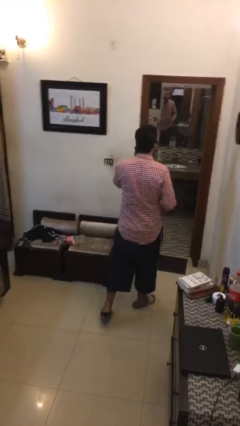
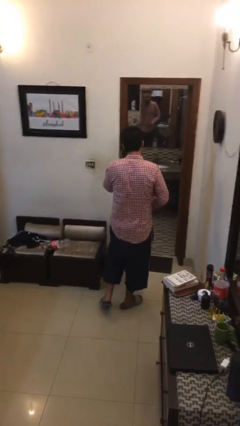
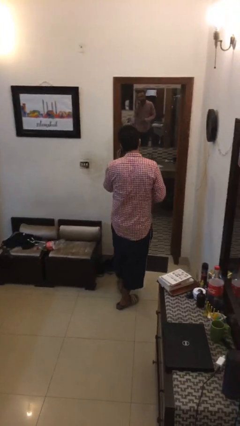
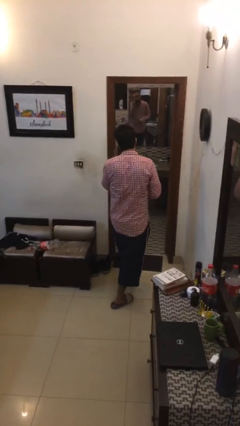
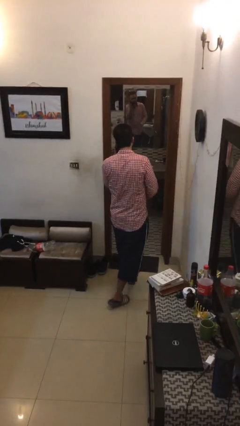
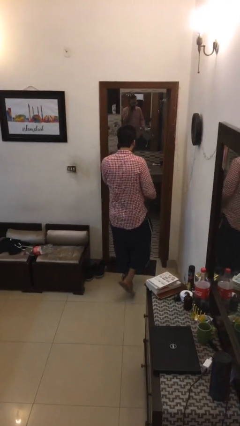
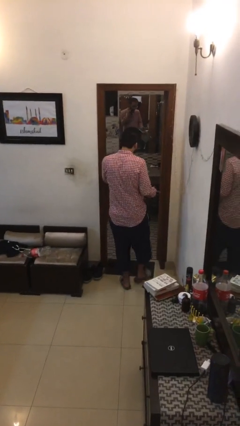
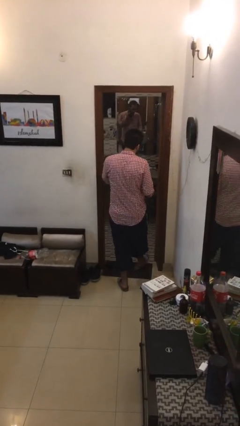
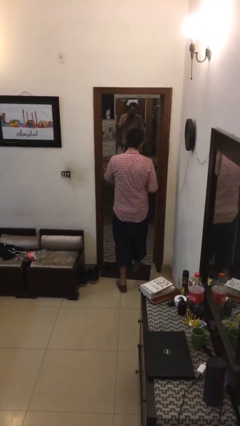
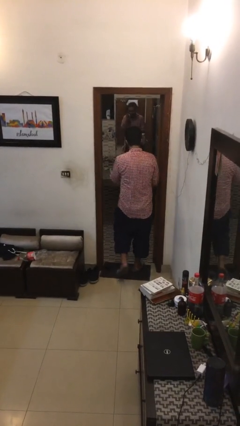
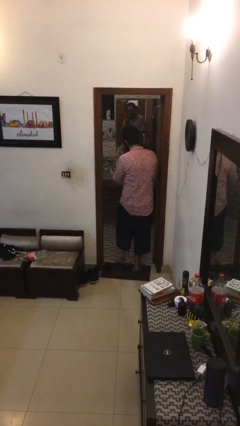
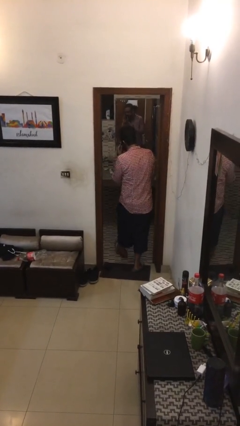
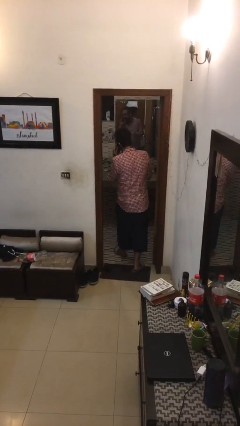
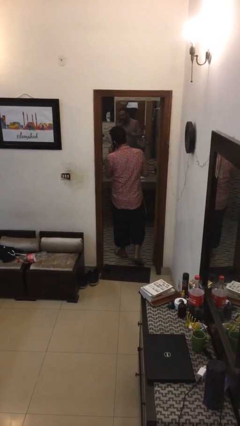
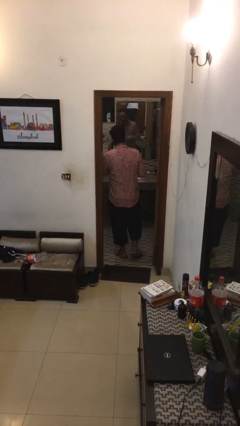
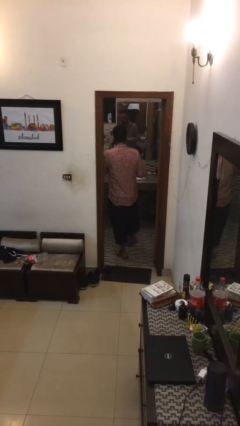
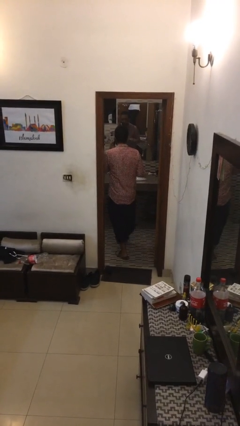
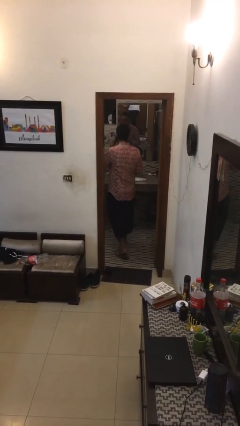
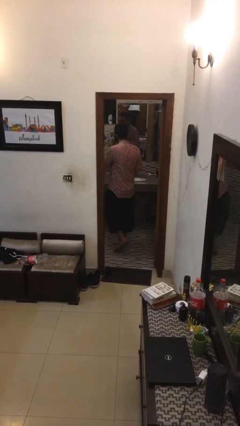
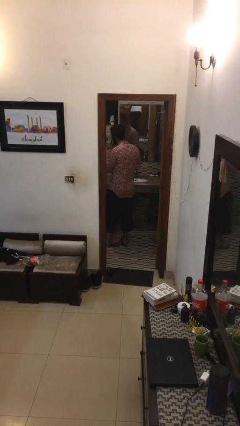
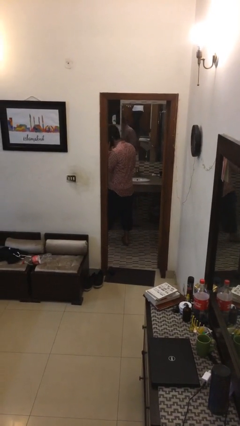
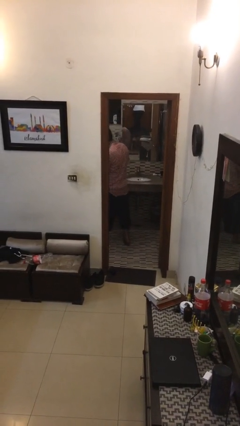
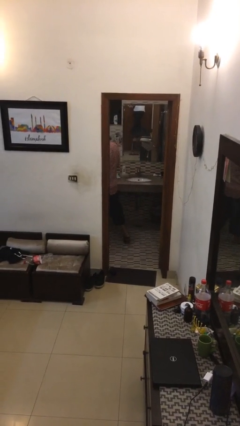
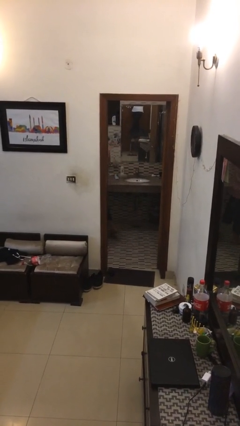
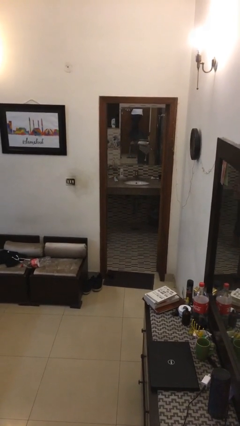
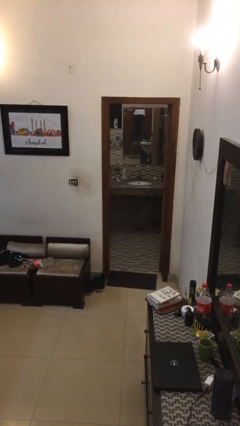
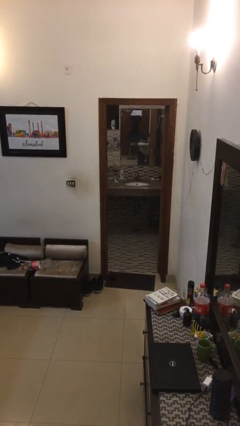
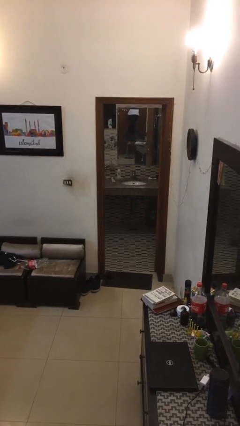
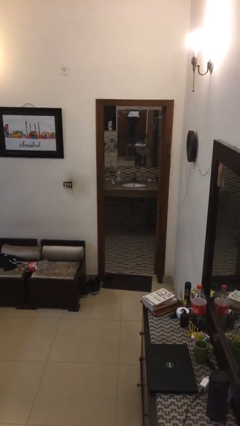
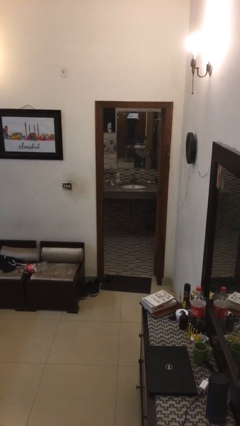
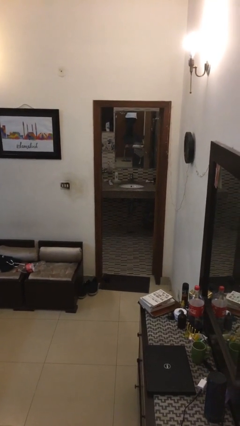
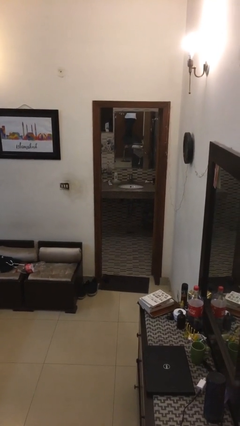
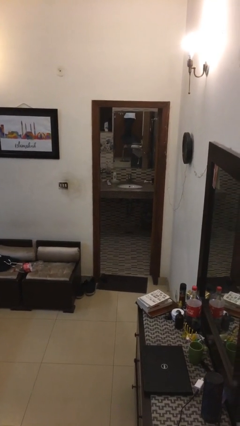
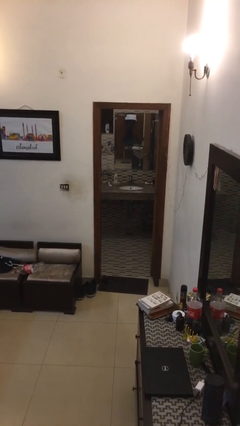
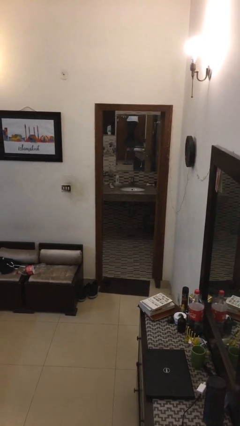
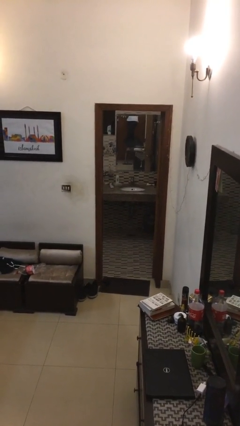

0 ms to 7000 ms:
person exits scene through structure

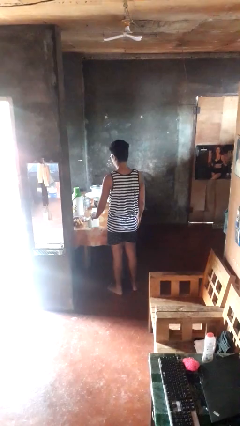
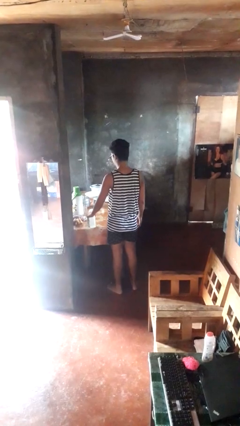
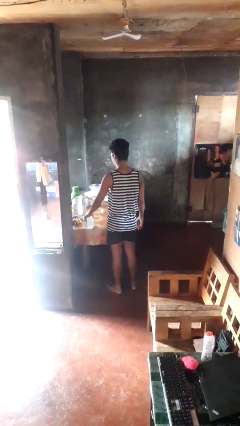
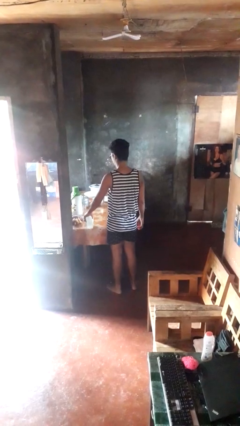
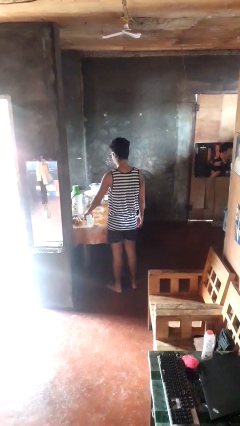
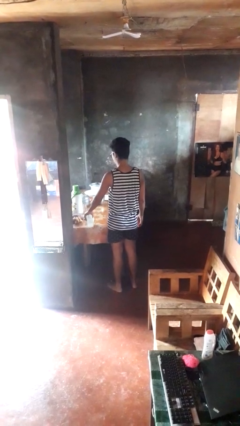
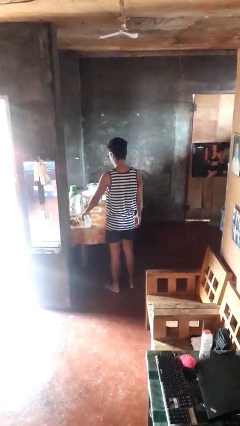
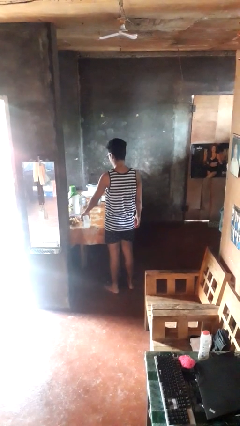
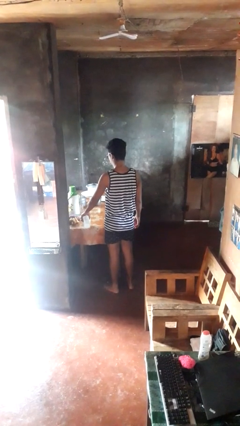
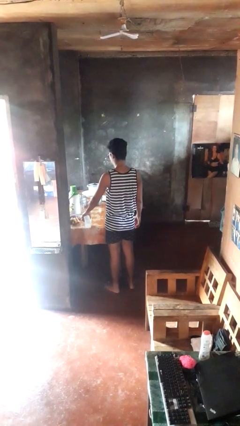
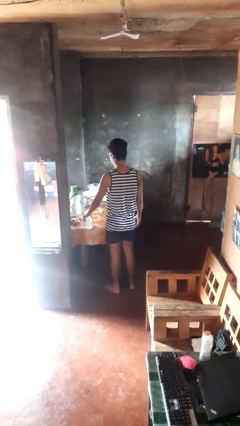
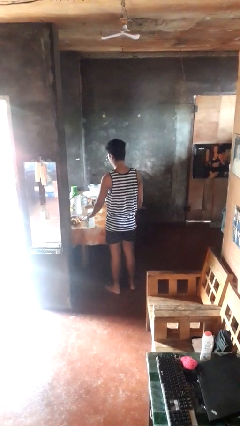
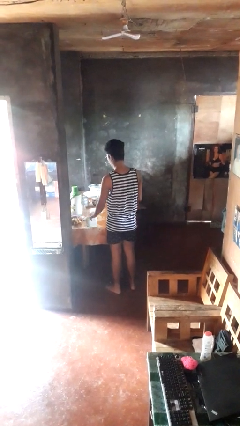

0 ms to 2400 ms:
person pours liquid into cup

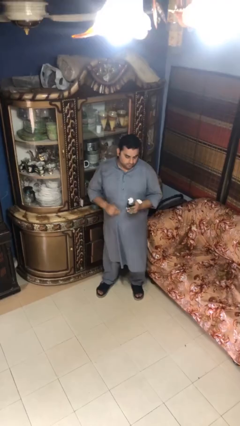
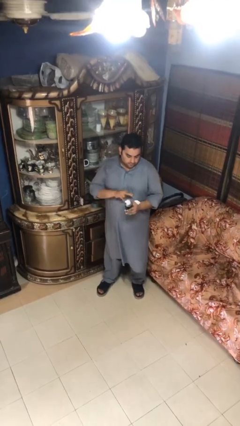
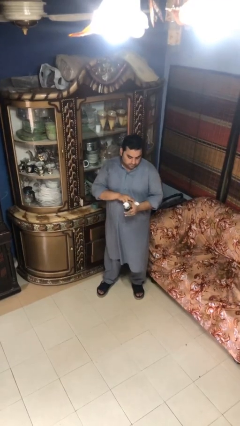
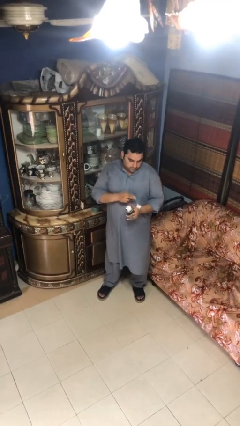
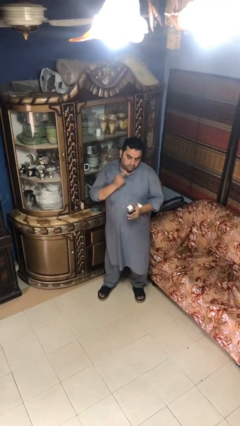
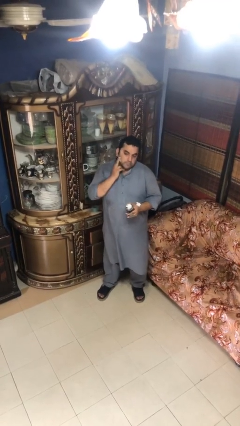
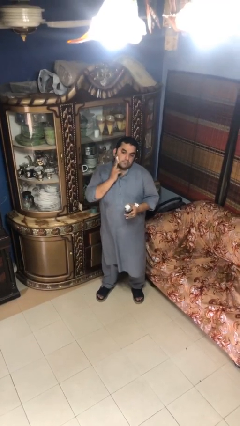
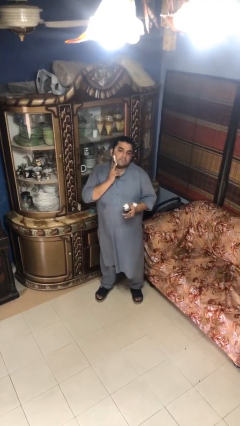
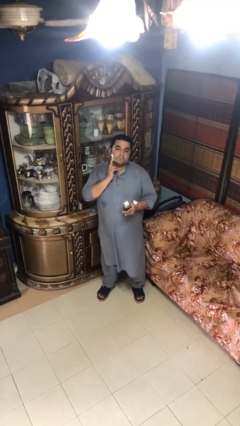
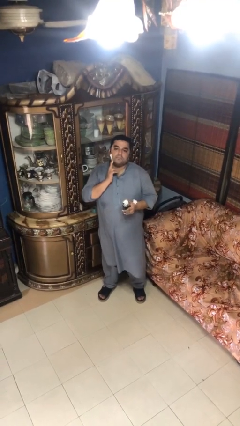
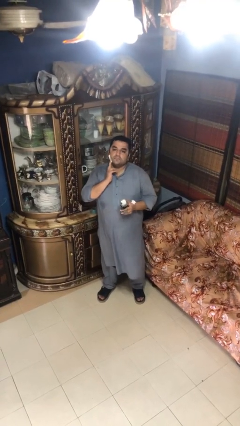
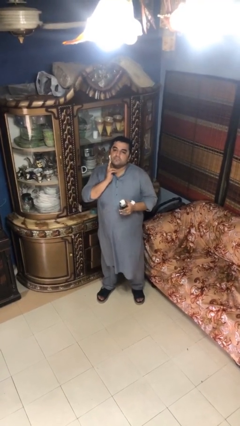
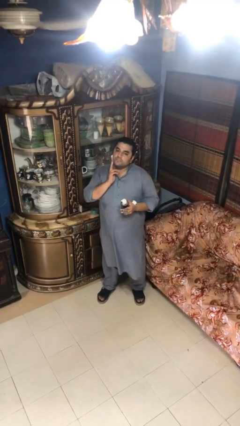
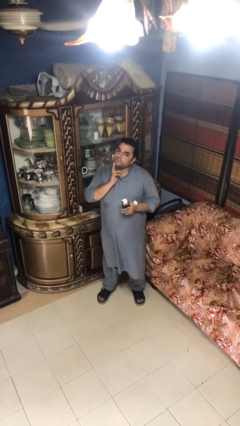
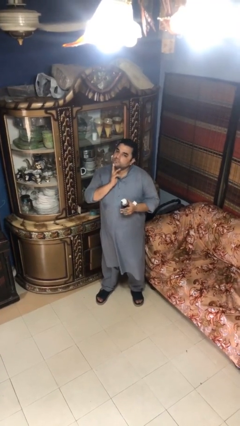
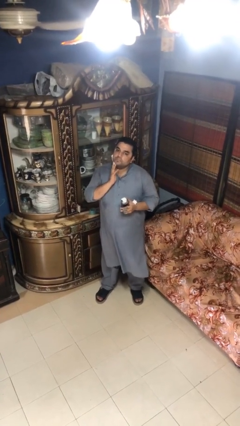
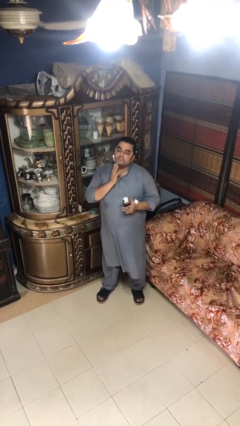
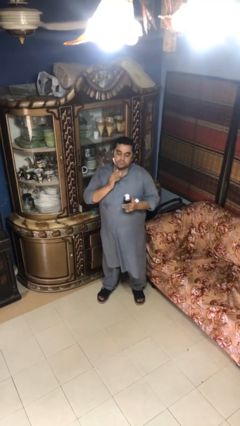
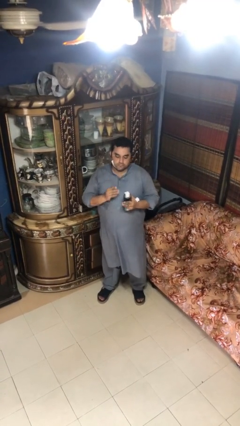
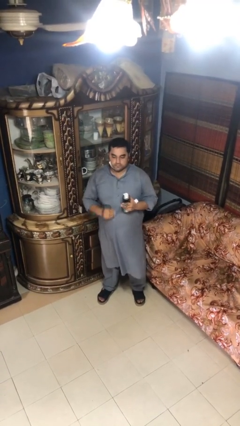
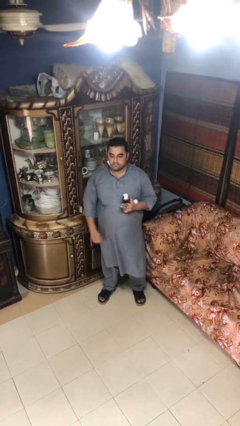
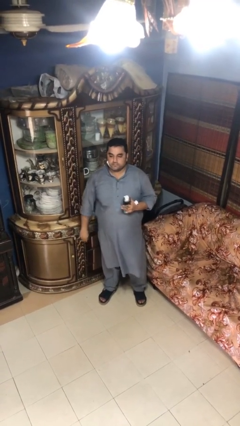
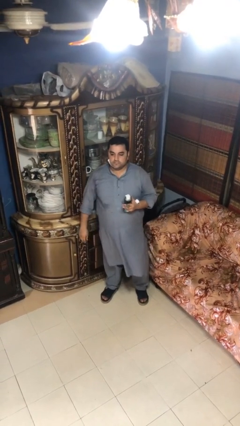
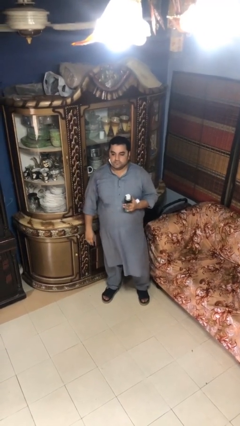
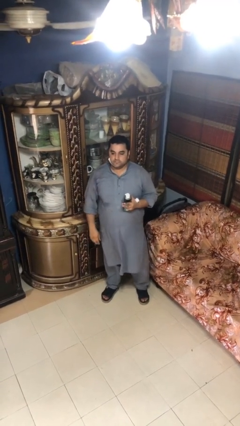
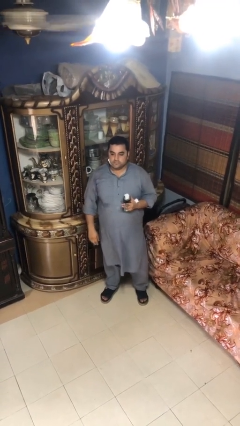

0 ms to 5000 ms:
person applies shaving cream

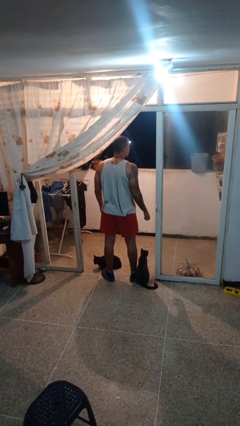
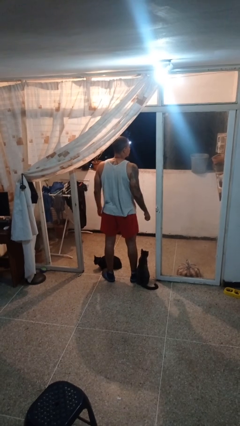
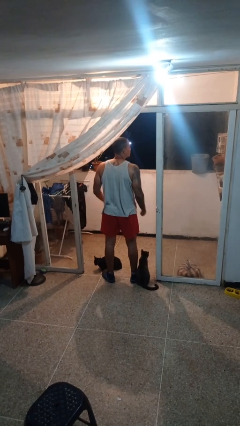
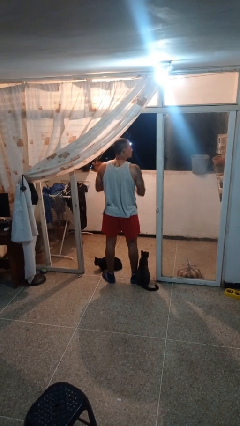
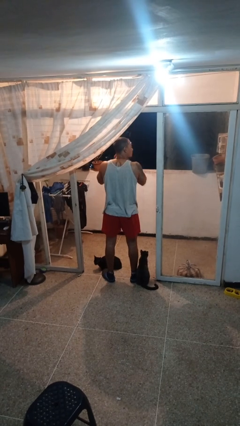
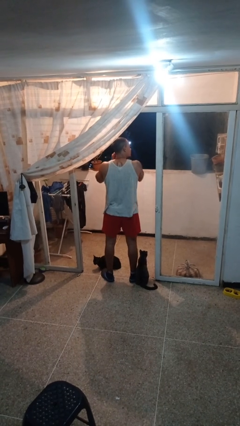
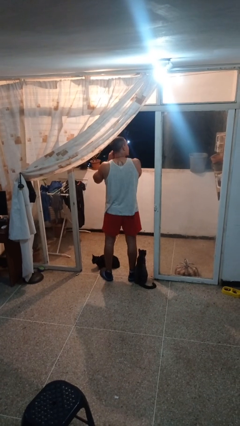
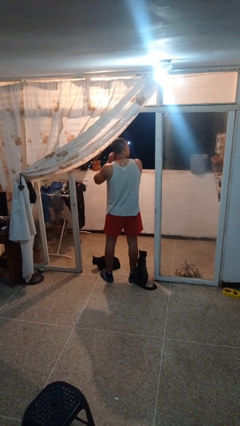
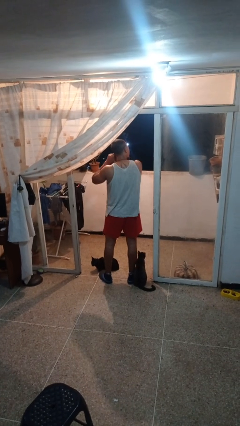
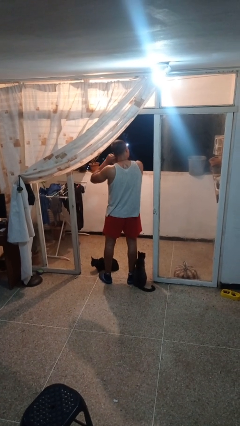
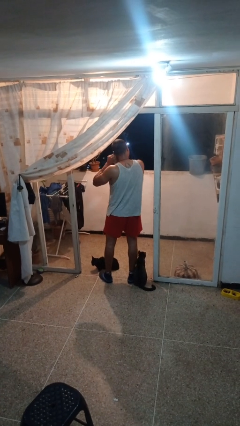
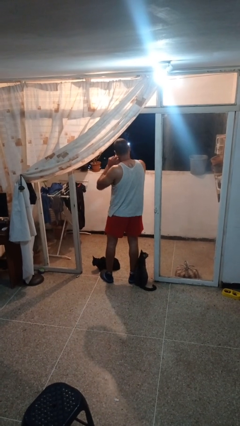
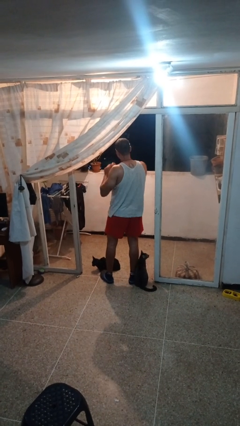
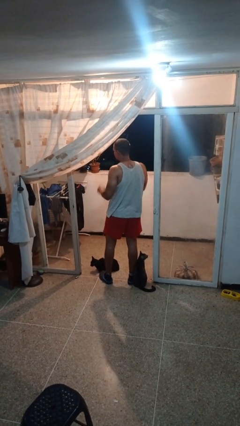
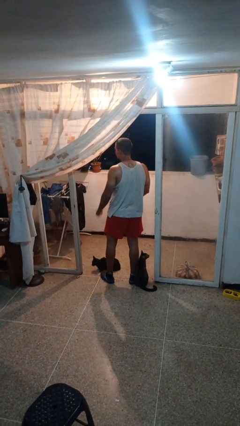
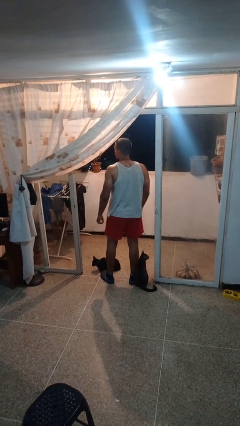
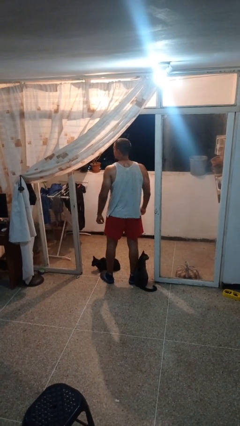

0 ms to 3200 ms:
person puts on earrings
